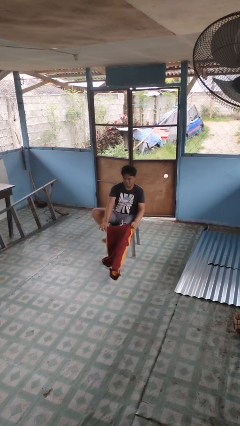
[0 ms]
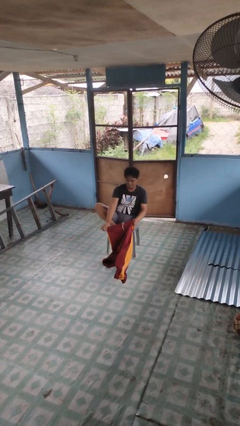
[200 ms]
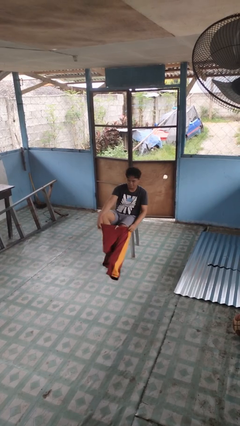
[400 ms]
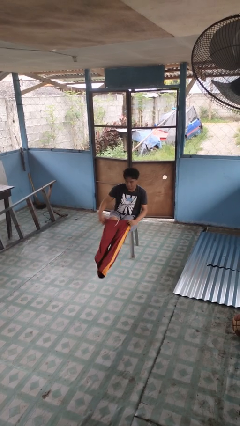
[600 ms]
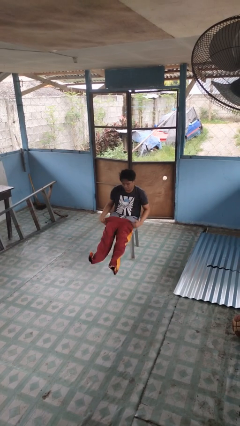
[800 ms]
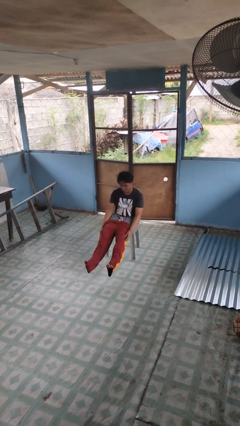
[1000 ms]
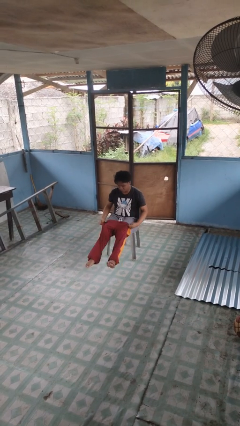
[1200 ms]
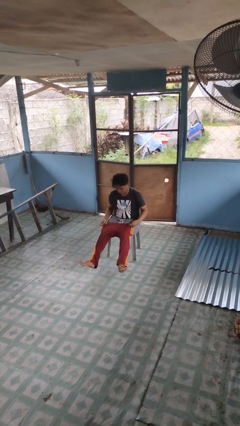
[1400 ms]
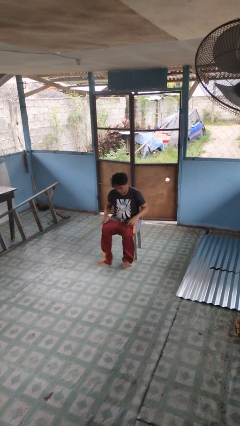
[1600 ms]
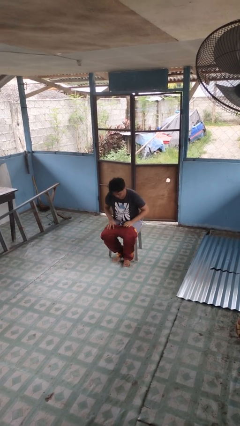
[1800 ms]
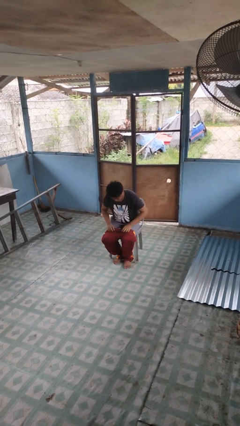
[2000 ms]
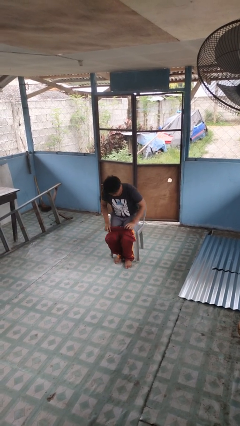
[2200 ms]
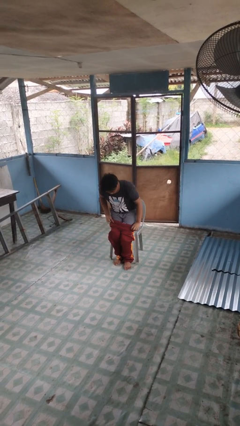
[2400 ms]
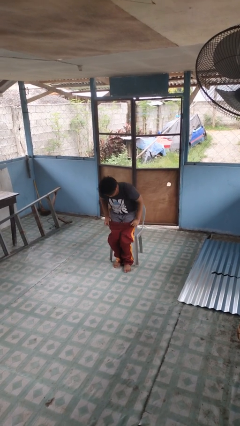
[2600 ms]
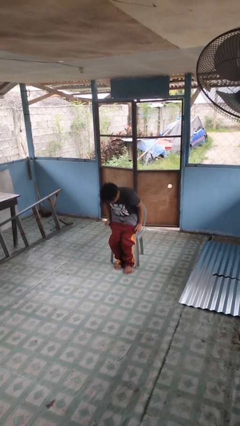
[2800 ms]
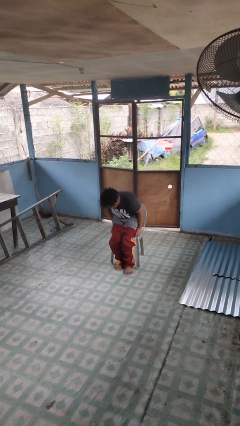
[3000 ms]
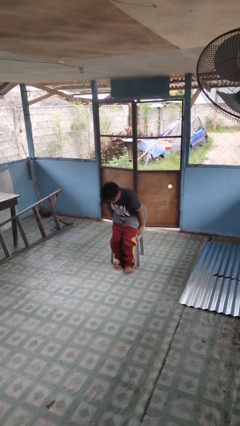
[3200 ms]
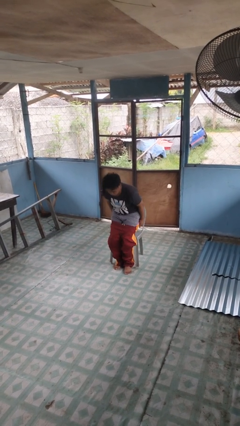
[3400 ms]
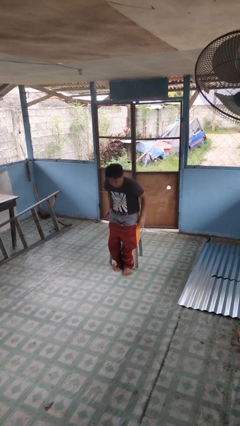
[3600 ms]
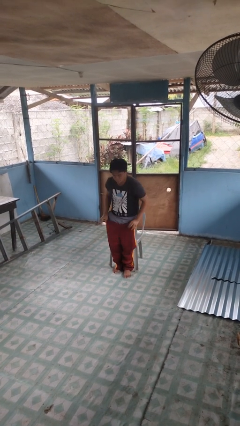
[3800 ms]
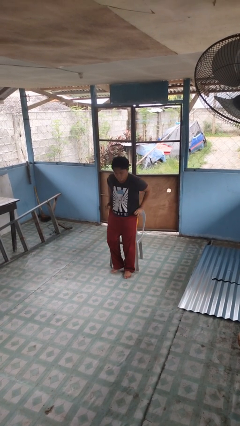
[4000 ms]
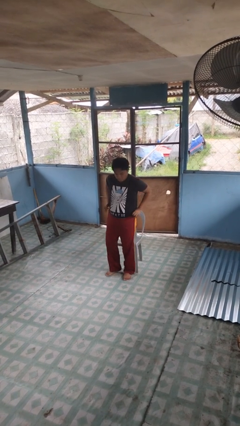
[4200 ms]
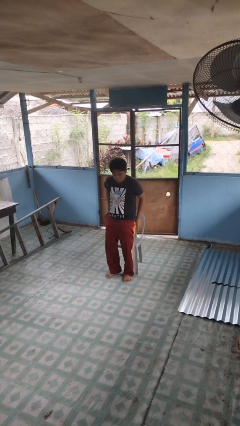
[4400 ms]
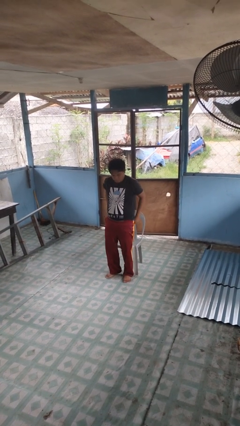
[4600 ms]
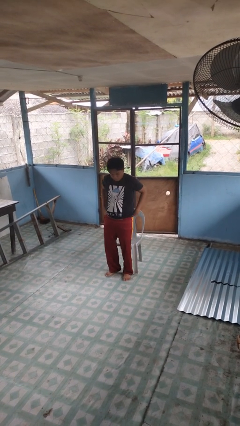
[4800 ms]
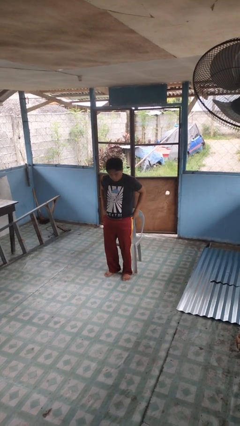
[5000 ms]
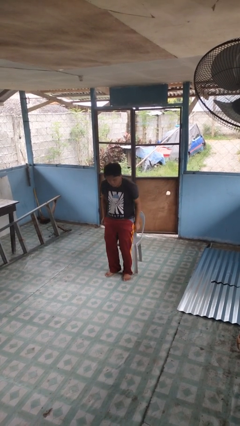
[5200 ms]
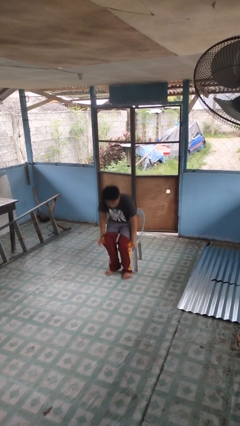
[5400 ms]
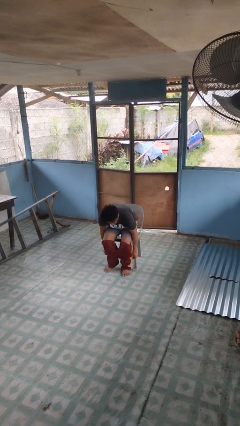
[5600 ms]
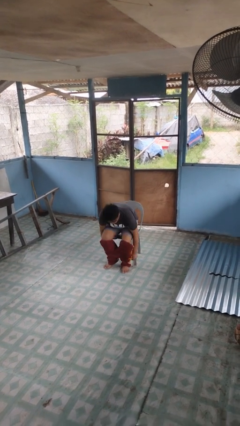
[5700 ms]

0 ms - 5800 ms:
person puts on pants

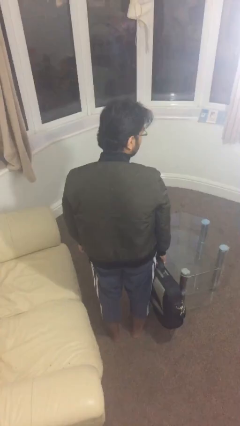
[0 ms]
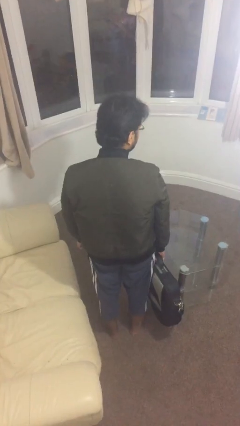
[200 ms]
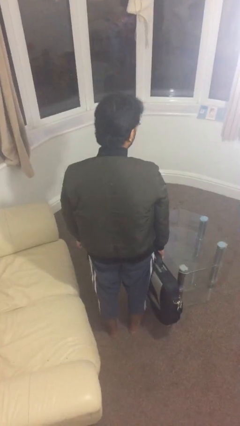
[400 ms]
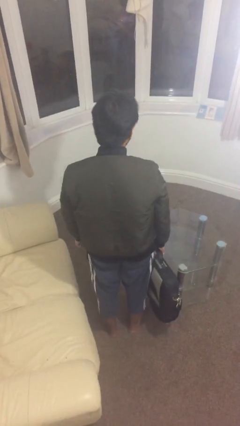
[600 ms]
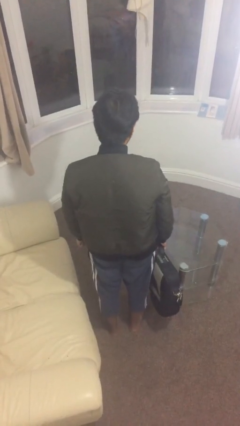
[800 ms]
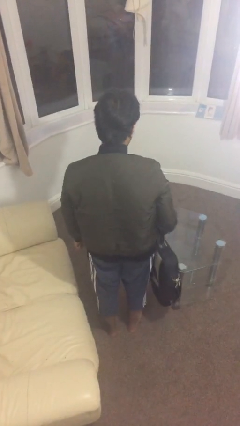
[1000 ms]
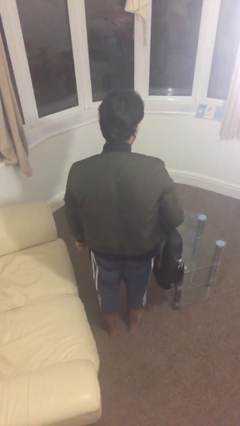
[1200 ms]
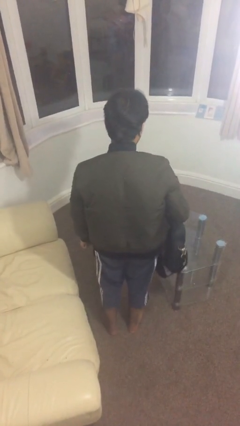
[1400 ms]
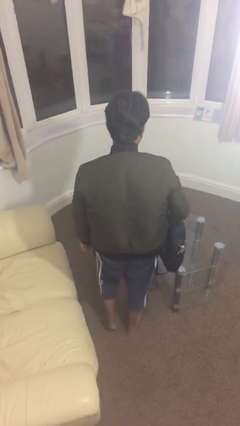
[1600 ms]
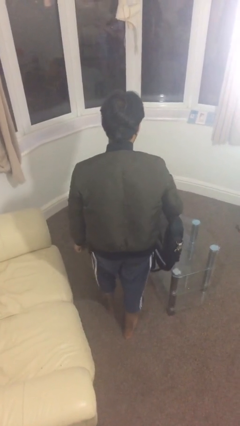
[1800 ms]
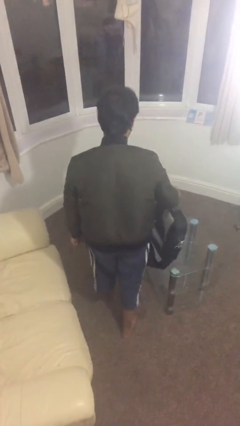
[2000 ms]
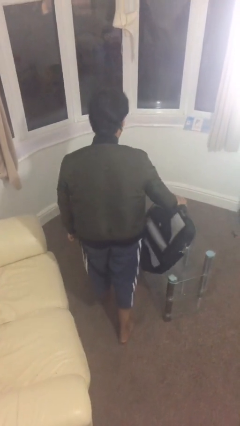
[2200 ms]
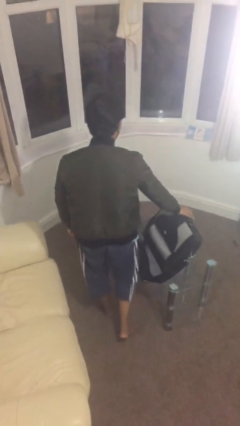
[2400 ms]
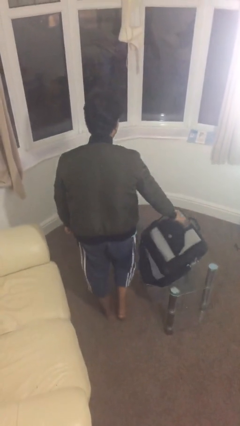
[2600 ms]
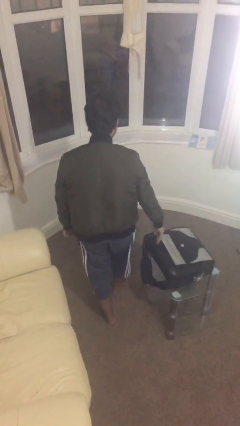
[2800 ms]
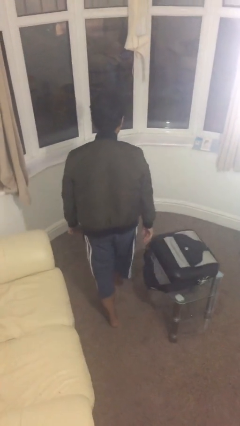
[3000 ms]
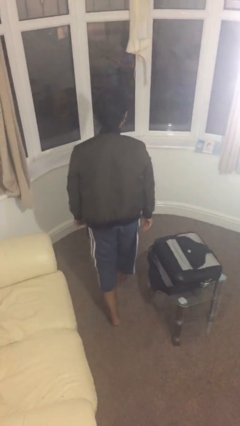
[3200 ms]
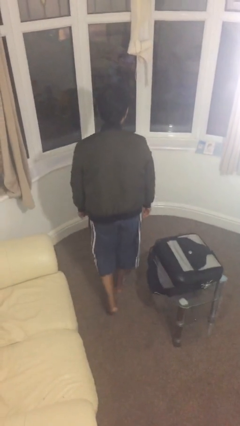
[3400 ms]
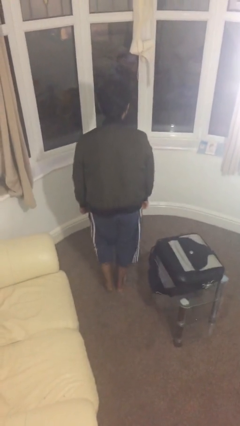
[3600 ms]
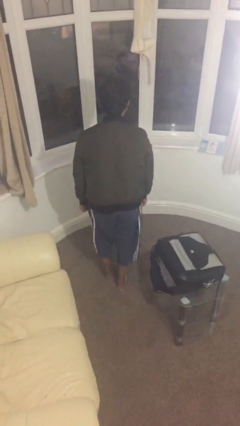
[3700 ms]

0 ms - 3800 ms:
person puts down object on table

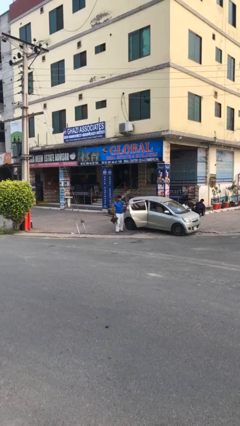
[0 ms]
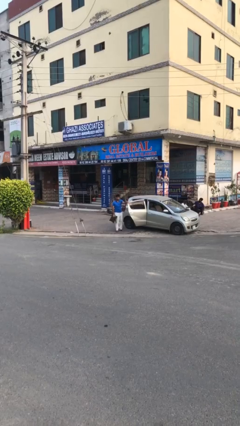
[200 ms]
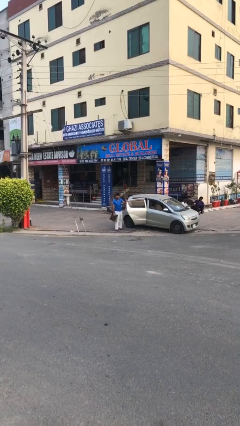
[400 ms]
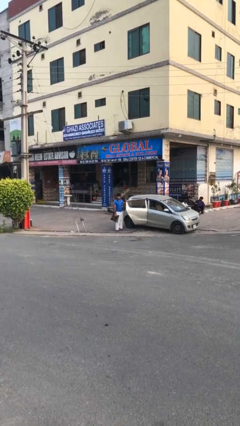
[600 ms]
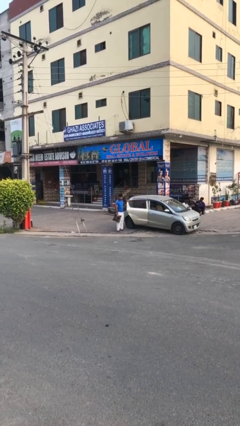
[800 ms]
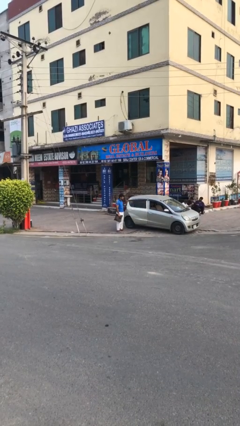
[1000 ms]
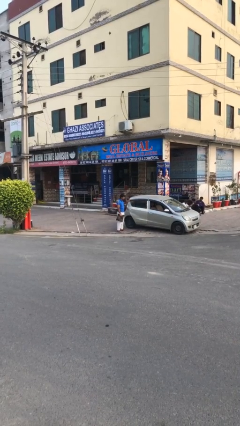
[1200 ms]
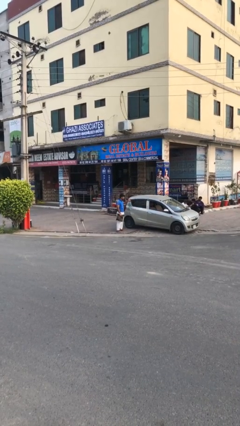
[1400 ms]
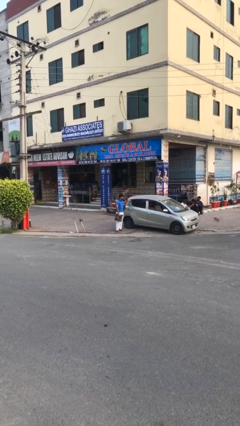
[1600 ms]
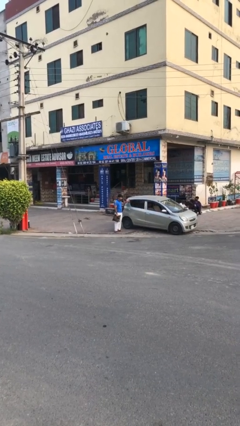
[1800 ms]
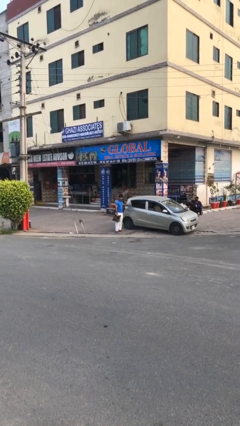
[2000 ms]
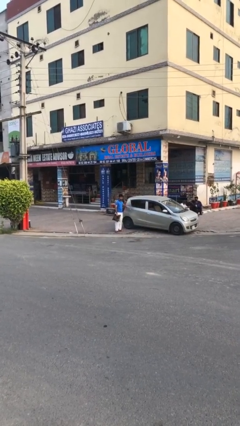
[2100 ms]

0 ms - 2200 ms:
person closes car door

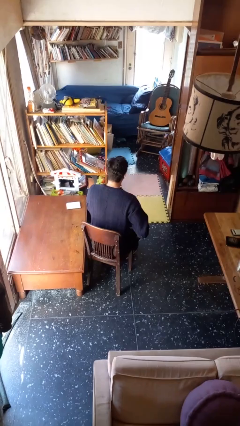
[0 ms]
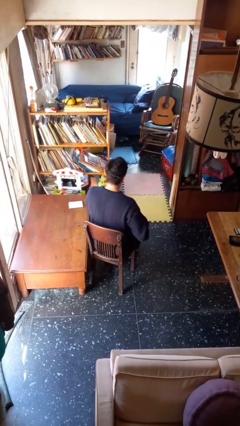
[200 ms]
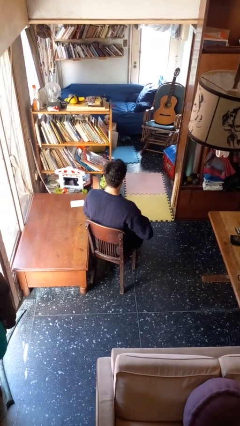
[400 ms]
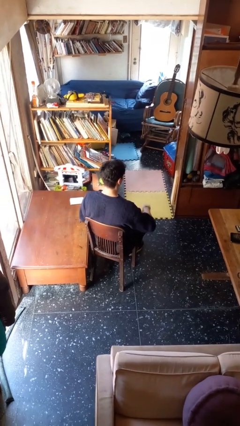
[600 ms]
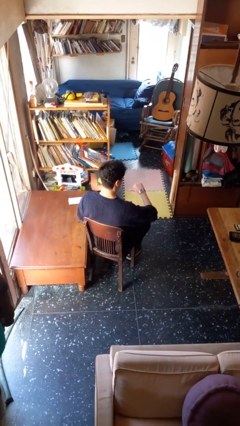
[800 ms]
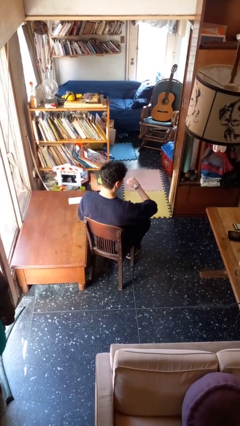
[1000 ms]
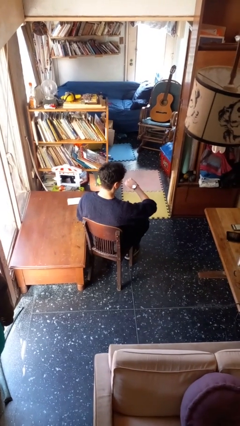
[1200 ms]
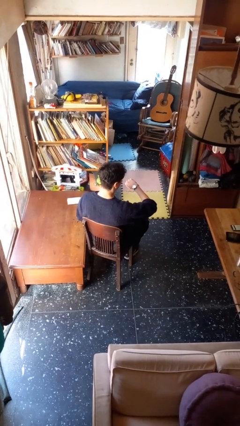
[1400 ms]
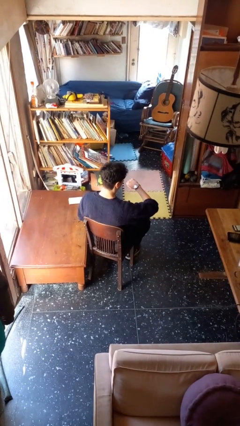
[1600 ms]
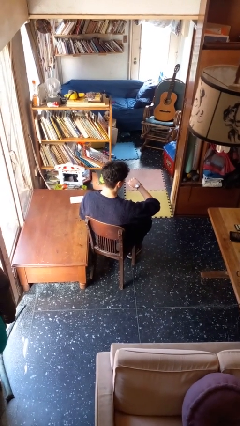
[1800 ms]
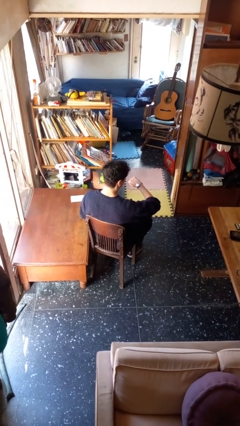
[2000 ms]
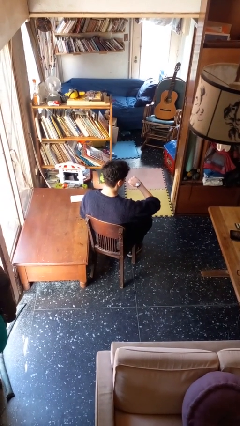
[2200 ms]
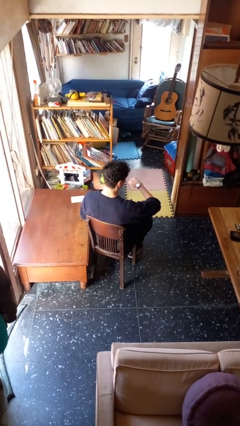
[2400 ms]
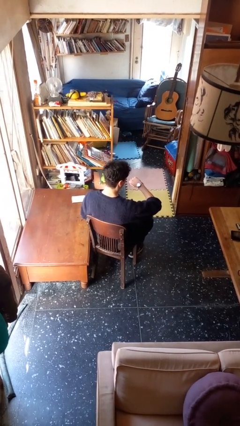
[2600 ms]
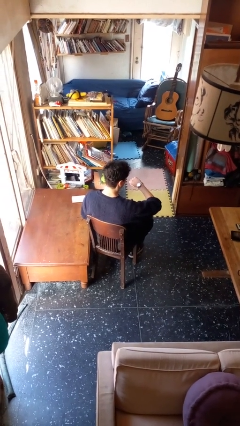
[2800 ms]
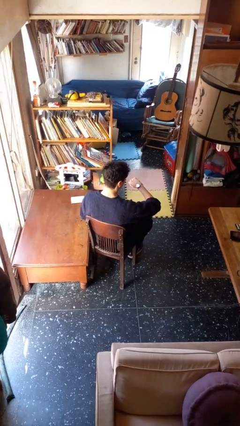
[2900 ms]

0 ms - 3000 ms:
person looks at wristwatch

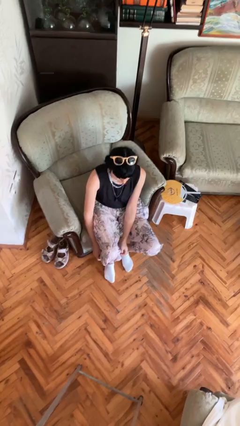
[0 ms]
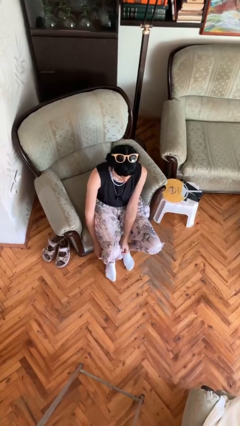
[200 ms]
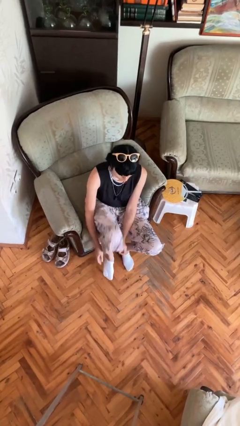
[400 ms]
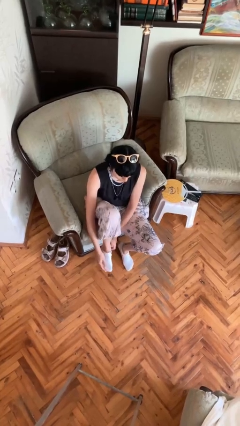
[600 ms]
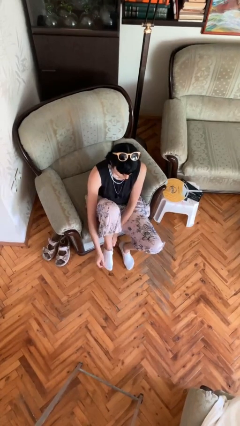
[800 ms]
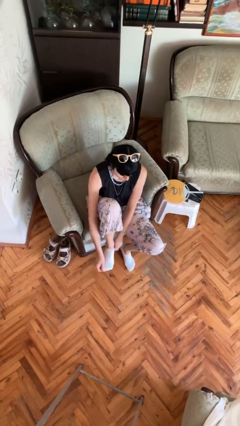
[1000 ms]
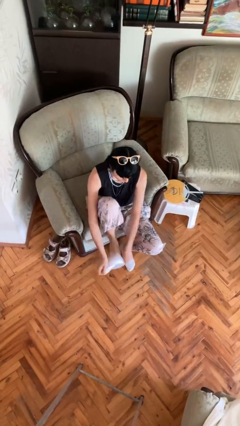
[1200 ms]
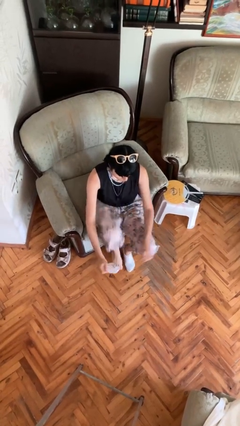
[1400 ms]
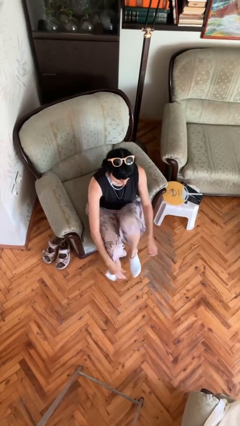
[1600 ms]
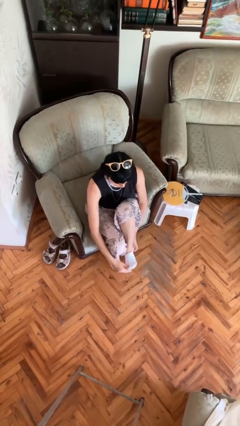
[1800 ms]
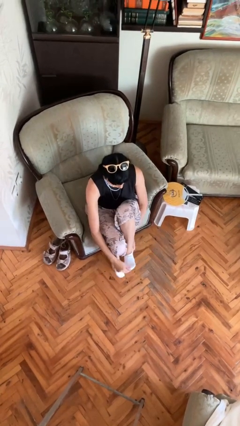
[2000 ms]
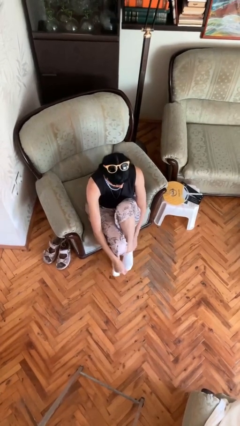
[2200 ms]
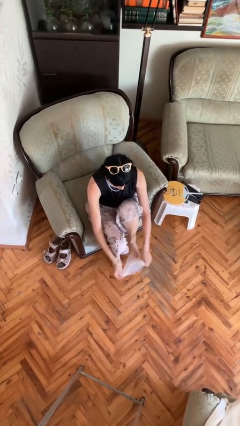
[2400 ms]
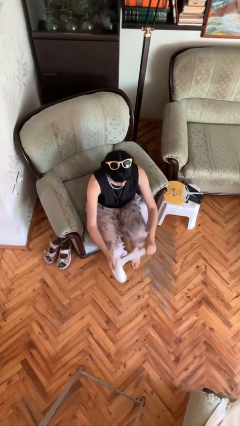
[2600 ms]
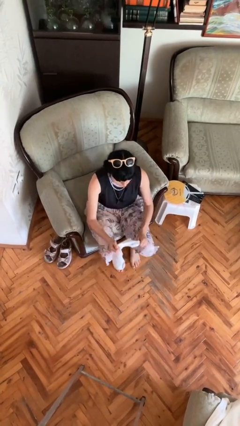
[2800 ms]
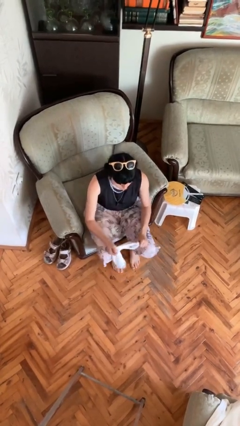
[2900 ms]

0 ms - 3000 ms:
person takes off socks
